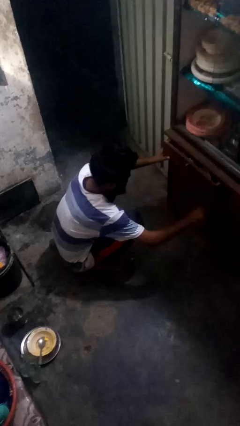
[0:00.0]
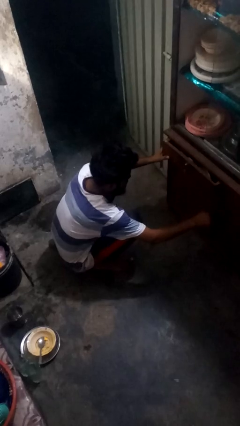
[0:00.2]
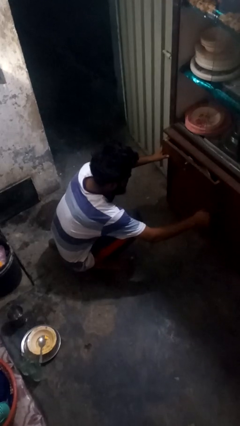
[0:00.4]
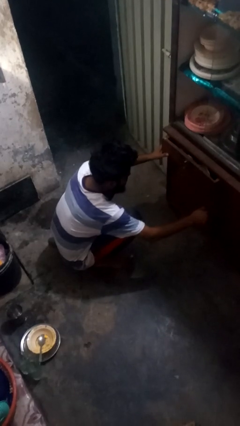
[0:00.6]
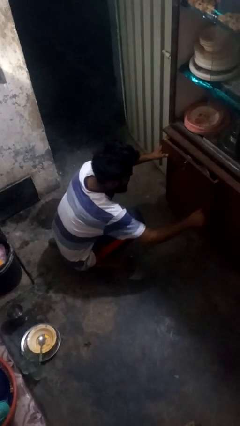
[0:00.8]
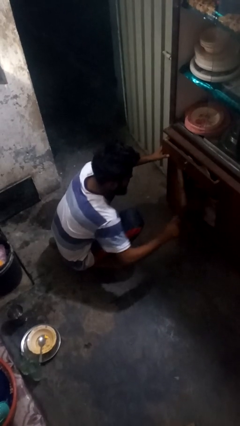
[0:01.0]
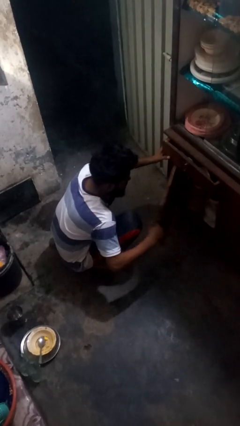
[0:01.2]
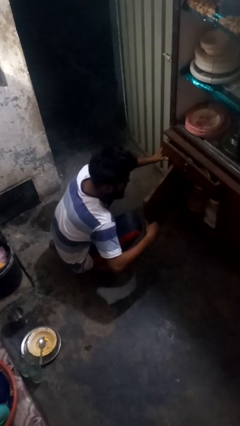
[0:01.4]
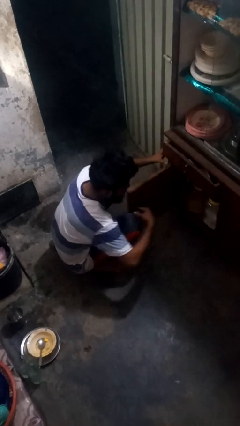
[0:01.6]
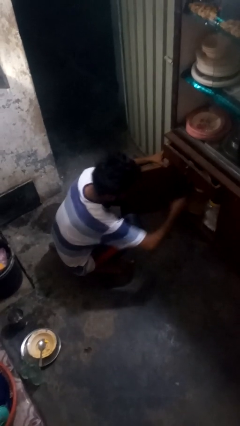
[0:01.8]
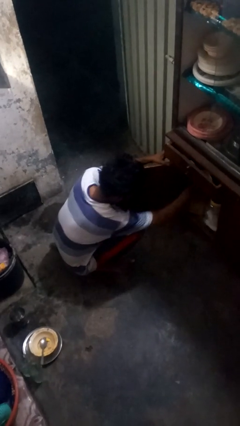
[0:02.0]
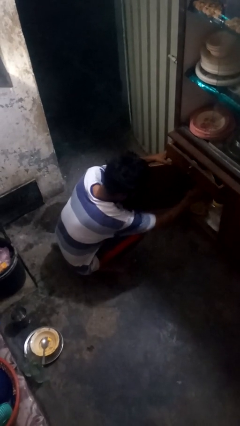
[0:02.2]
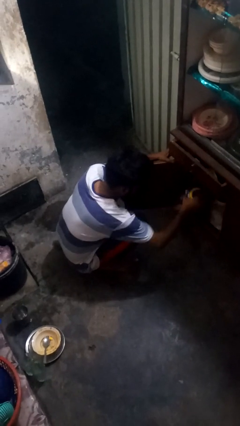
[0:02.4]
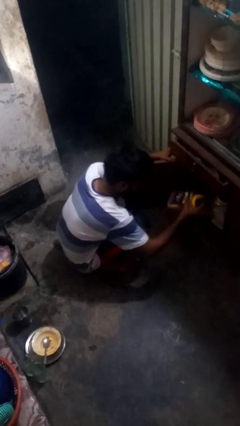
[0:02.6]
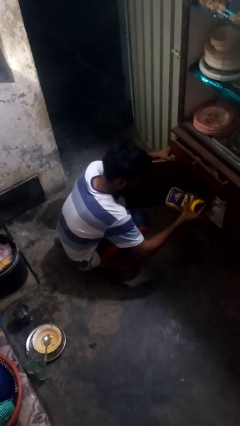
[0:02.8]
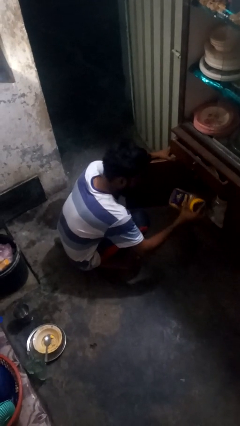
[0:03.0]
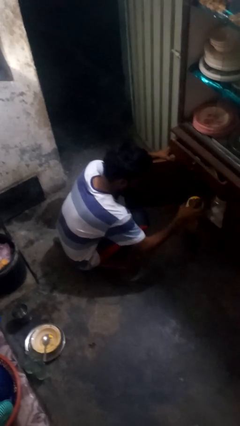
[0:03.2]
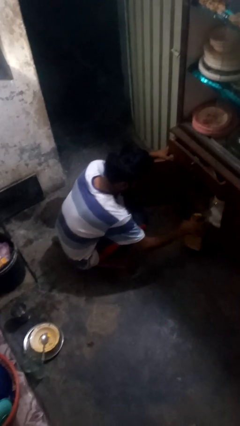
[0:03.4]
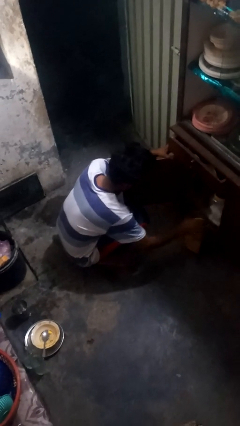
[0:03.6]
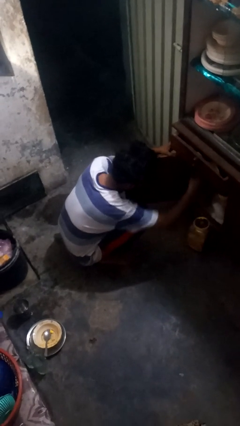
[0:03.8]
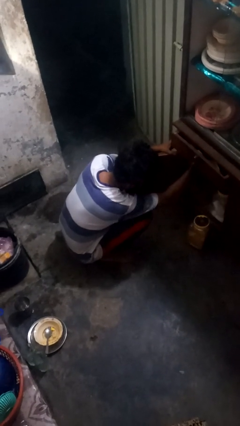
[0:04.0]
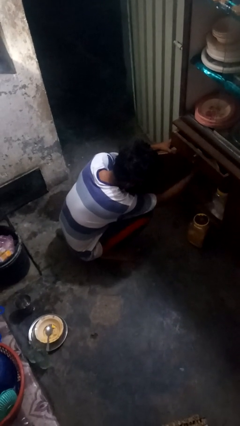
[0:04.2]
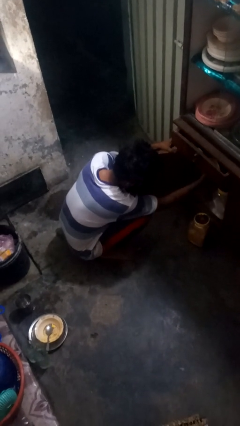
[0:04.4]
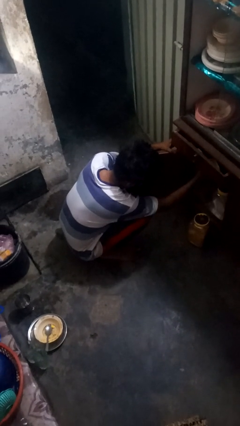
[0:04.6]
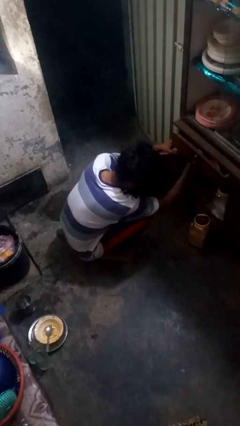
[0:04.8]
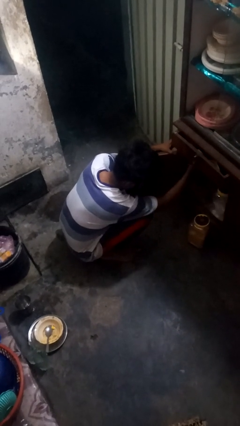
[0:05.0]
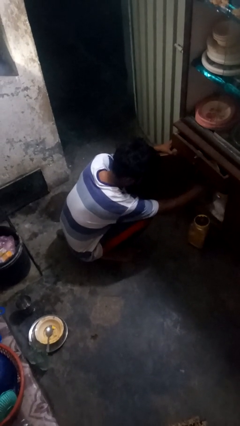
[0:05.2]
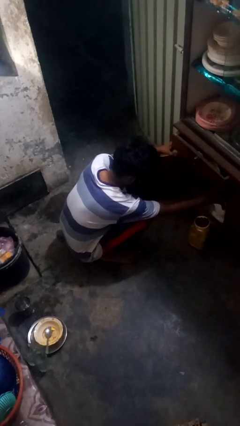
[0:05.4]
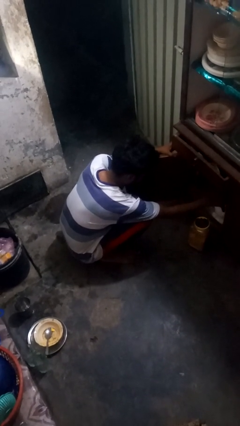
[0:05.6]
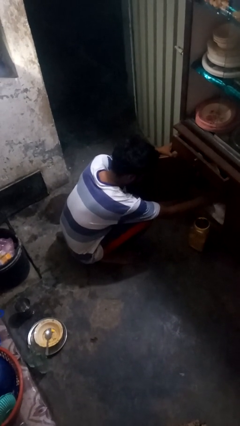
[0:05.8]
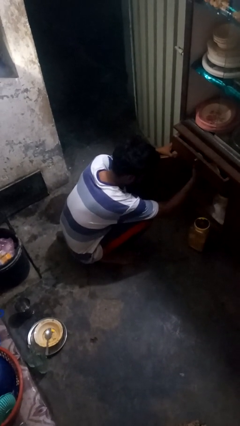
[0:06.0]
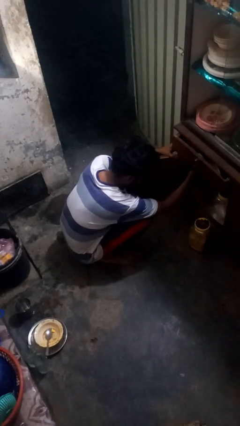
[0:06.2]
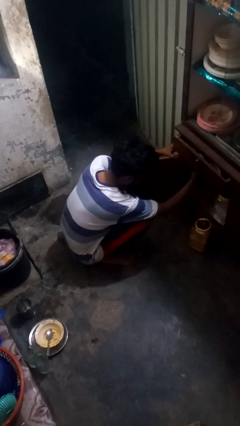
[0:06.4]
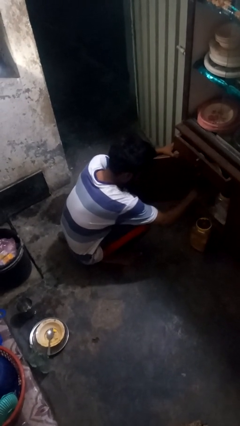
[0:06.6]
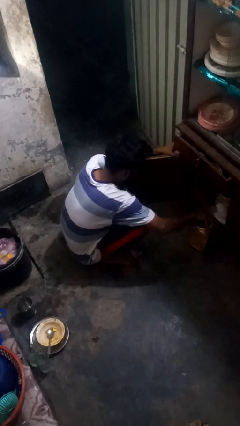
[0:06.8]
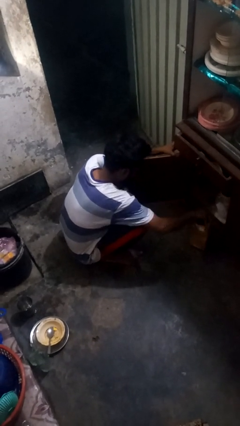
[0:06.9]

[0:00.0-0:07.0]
person puts object in cabinet

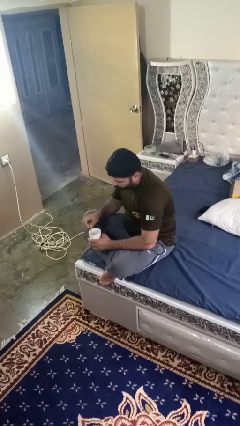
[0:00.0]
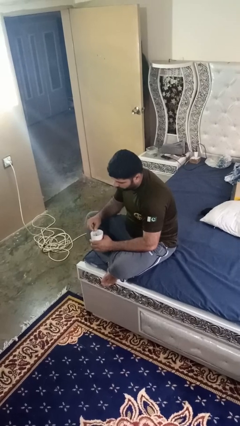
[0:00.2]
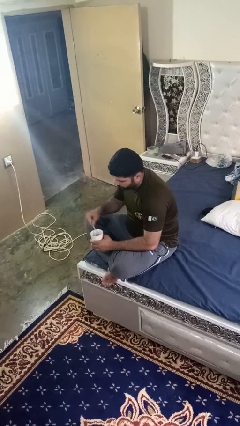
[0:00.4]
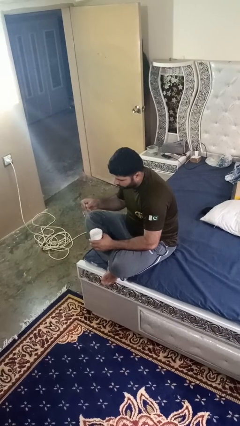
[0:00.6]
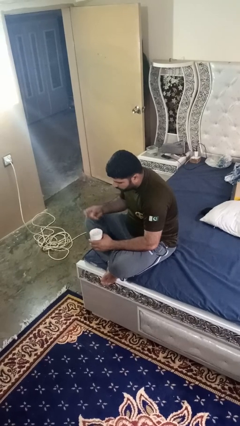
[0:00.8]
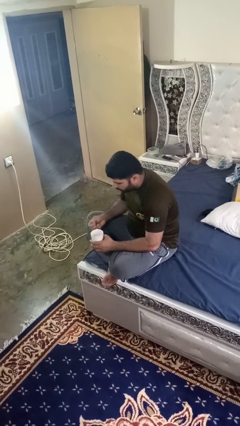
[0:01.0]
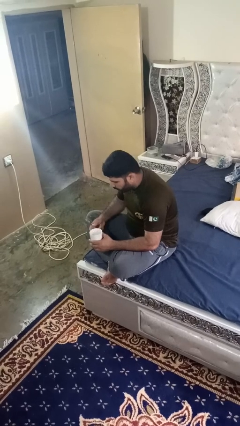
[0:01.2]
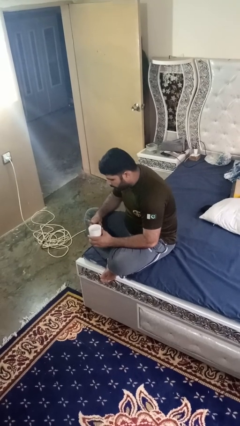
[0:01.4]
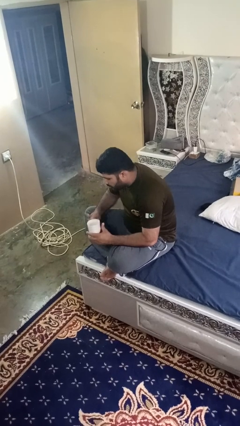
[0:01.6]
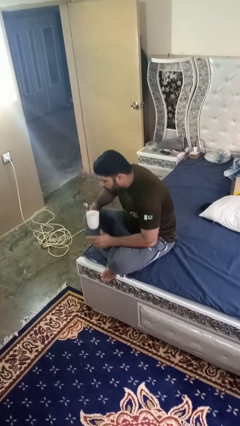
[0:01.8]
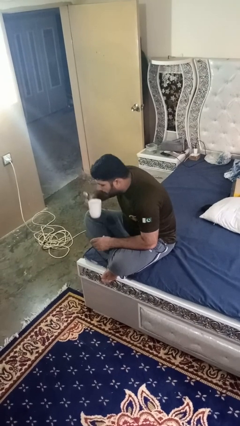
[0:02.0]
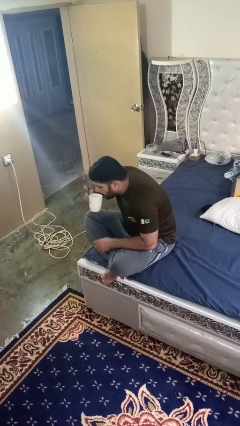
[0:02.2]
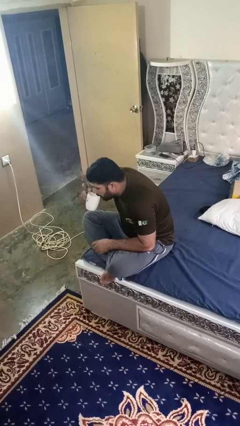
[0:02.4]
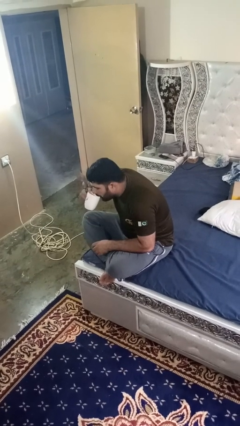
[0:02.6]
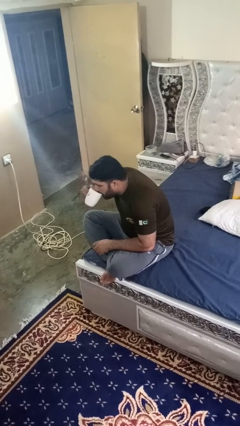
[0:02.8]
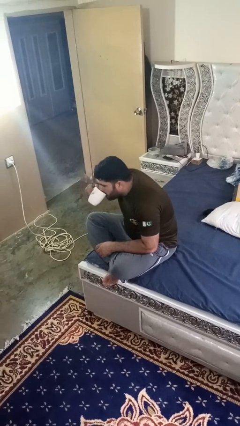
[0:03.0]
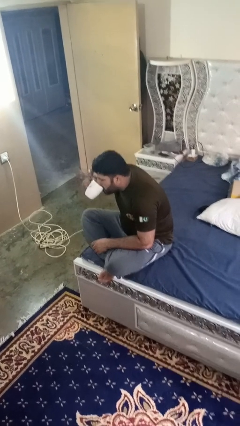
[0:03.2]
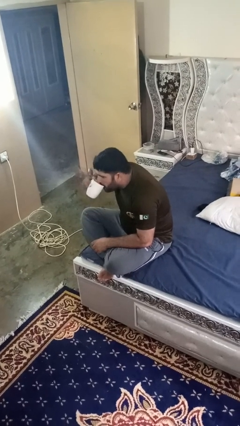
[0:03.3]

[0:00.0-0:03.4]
person drinks from mug

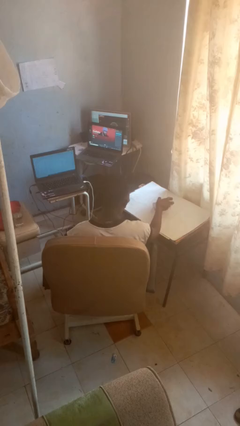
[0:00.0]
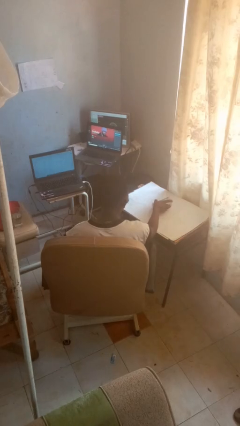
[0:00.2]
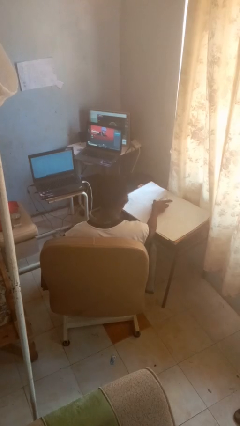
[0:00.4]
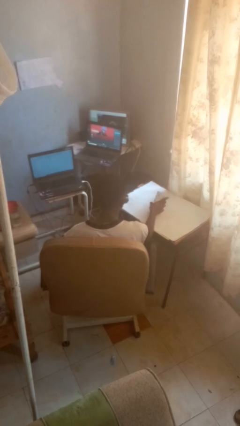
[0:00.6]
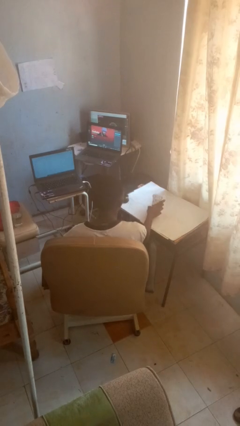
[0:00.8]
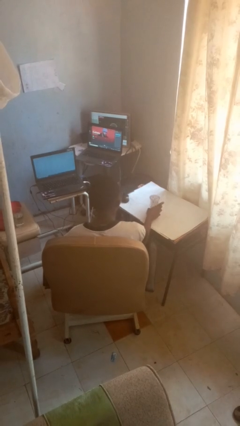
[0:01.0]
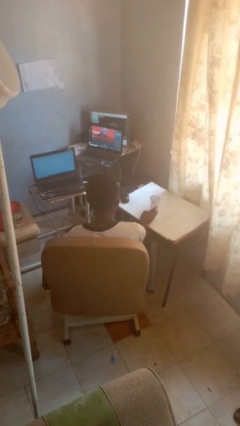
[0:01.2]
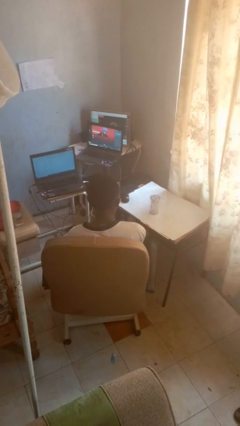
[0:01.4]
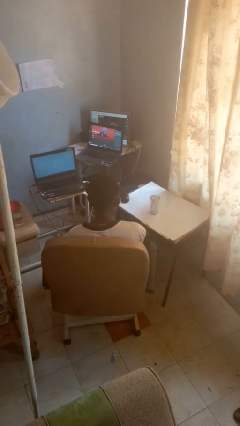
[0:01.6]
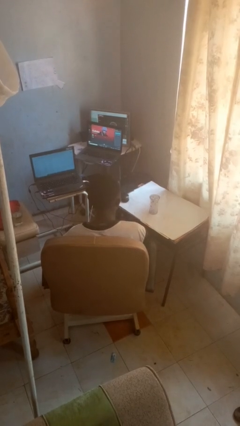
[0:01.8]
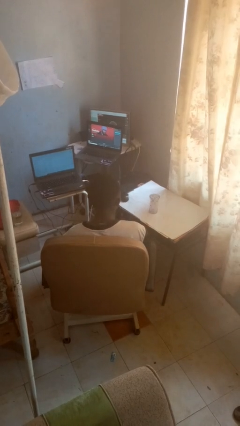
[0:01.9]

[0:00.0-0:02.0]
person sets upright glass

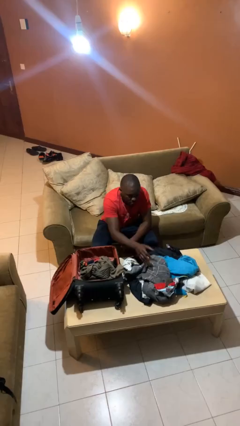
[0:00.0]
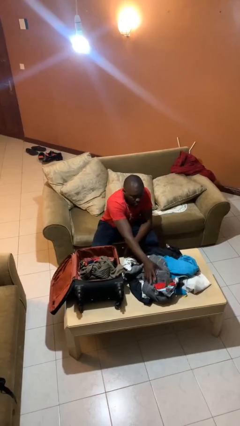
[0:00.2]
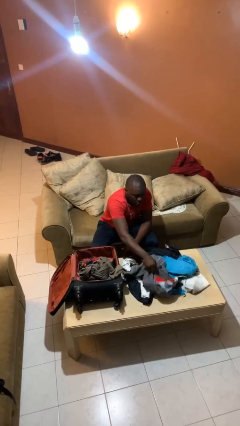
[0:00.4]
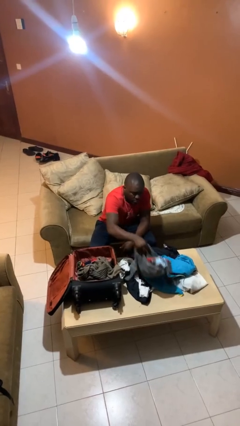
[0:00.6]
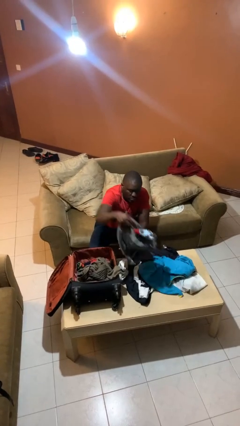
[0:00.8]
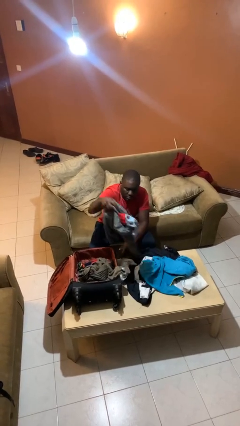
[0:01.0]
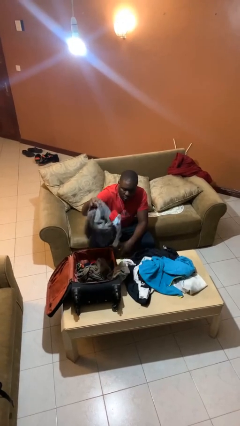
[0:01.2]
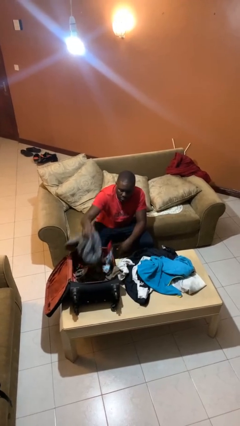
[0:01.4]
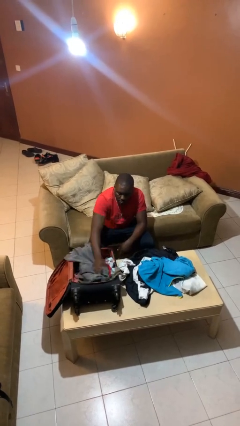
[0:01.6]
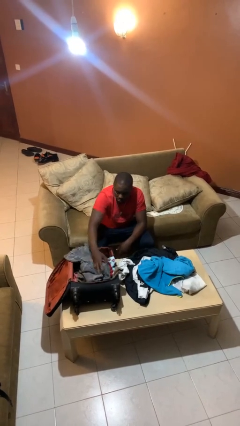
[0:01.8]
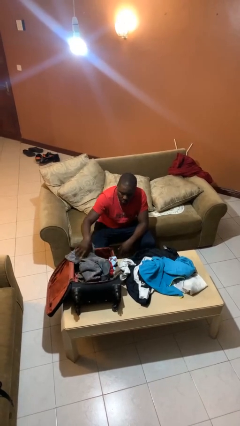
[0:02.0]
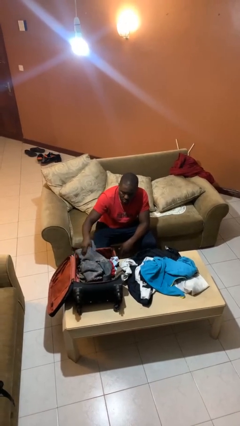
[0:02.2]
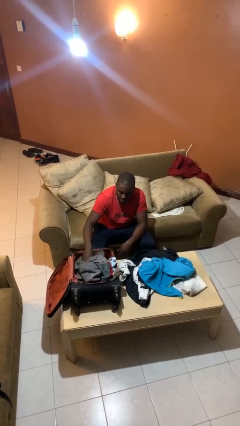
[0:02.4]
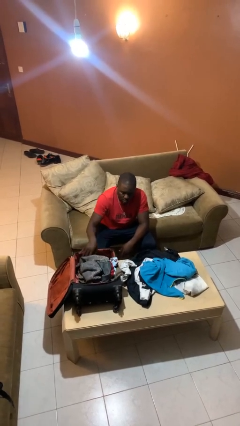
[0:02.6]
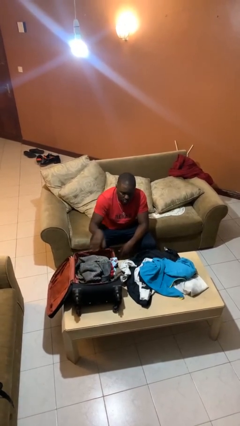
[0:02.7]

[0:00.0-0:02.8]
person loads clothes into suitcase

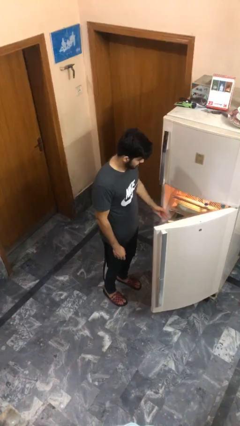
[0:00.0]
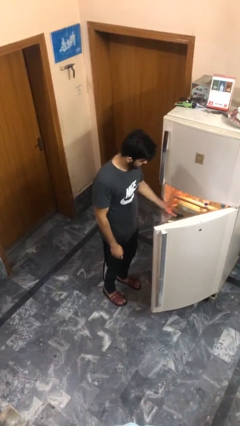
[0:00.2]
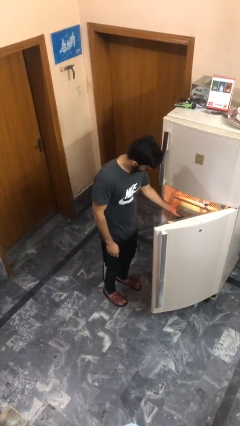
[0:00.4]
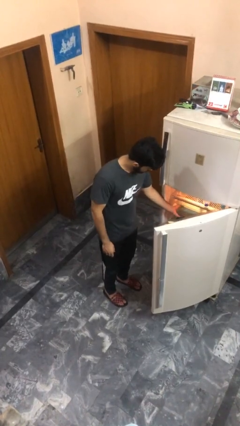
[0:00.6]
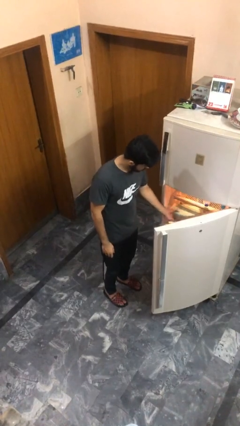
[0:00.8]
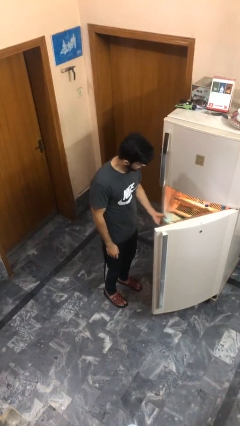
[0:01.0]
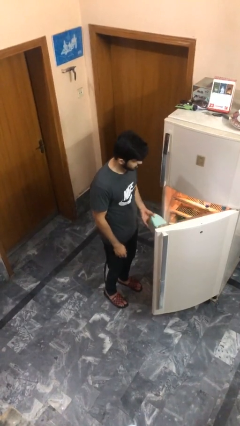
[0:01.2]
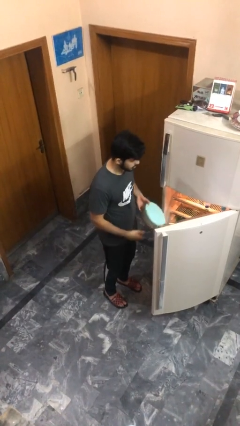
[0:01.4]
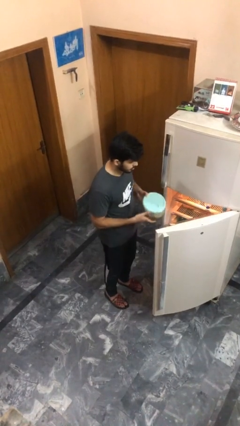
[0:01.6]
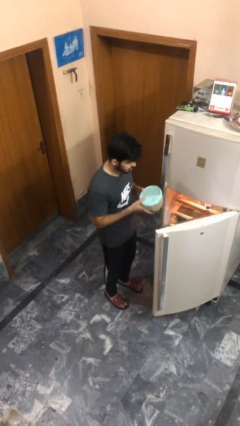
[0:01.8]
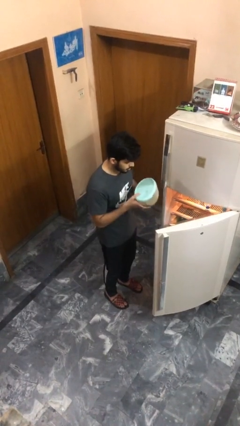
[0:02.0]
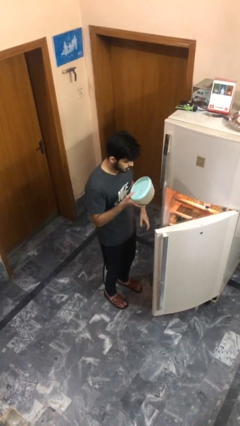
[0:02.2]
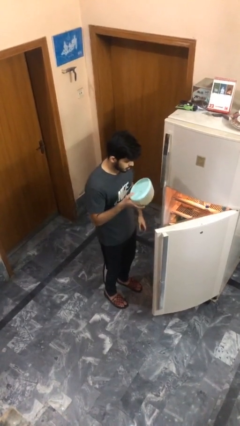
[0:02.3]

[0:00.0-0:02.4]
person picks up object from cabinet
